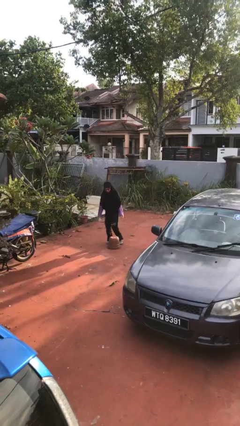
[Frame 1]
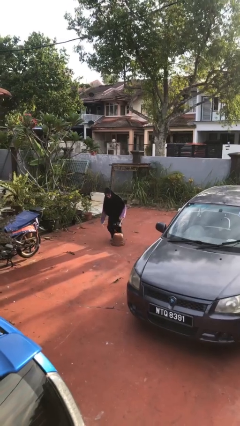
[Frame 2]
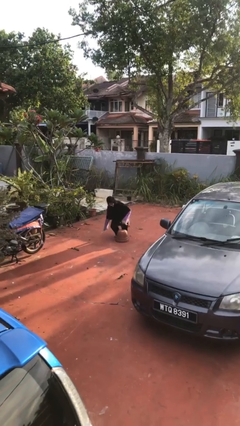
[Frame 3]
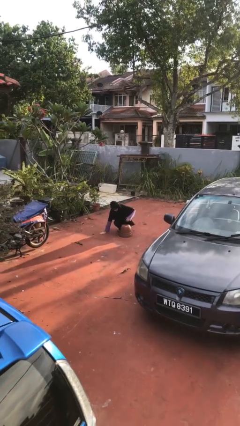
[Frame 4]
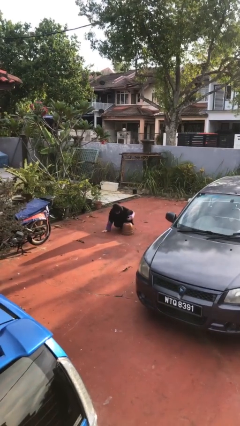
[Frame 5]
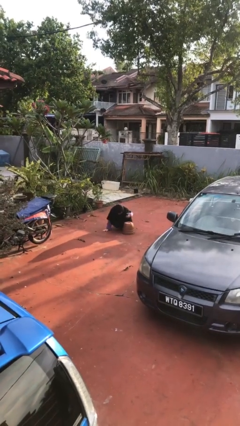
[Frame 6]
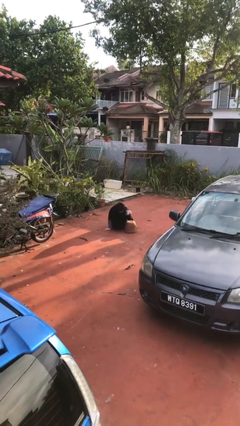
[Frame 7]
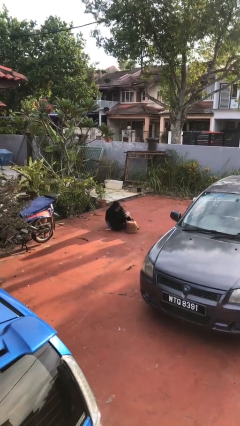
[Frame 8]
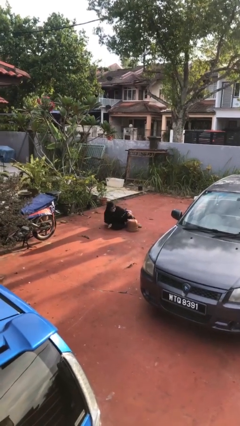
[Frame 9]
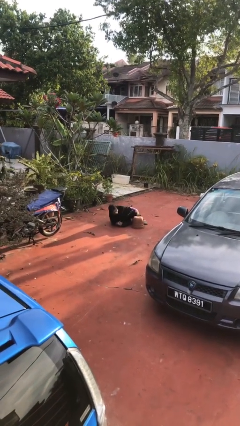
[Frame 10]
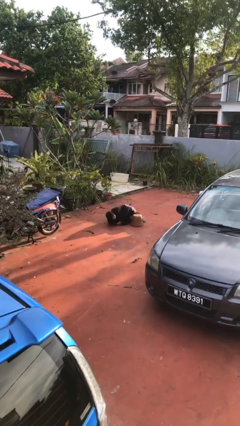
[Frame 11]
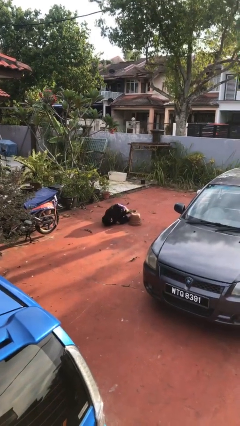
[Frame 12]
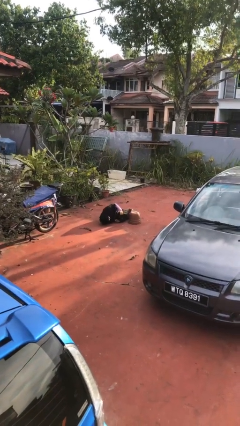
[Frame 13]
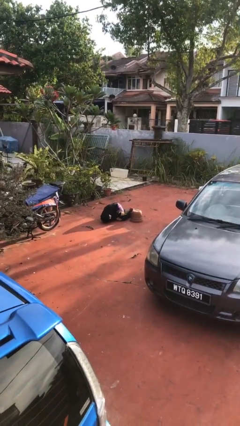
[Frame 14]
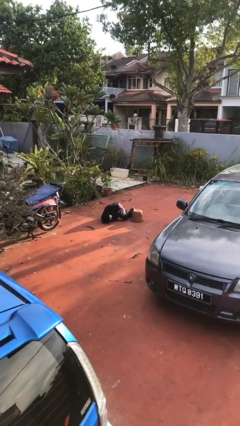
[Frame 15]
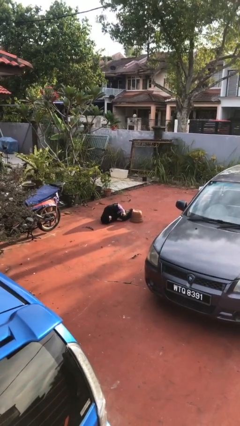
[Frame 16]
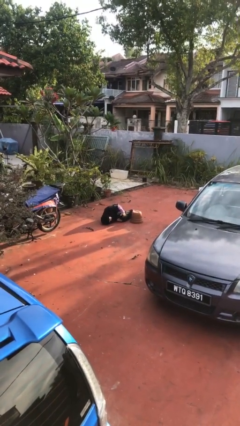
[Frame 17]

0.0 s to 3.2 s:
person lies down on floor

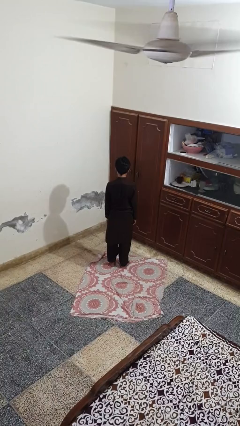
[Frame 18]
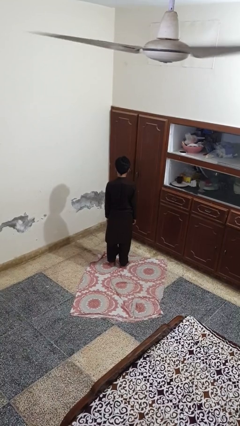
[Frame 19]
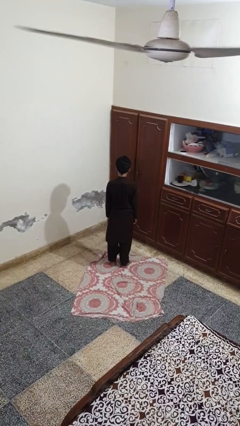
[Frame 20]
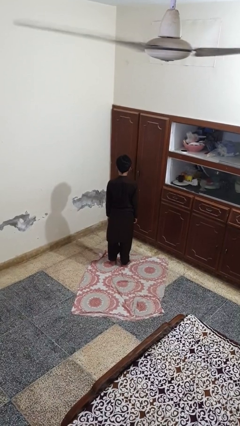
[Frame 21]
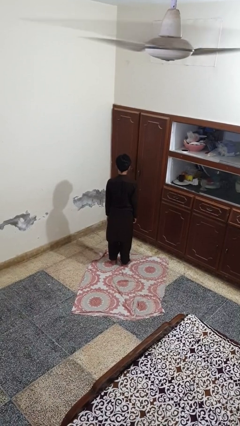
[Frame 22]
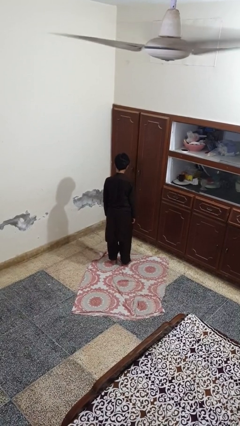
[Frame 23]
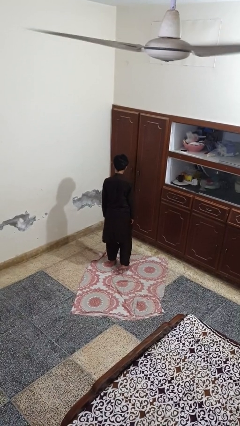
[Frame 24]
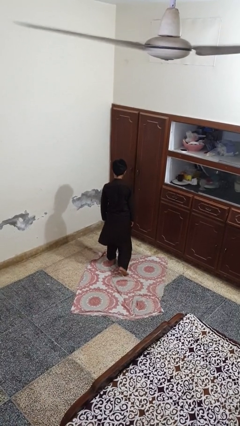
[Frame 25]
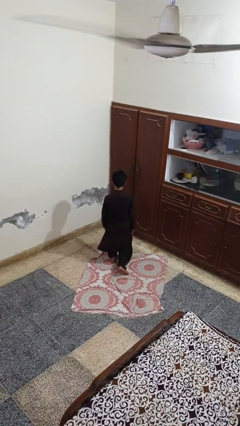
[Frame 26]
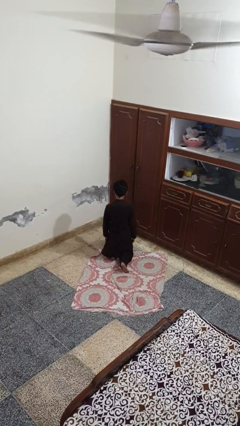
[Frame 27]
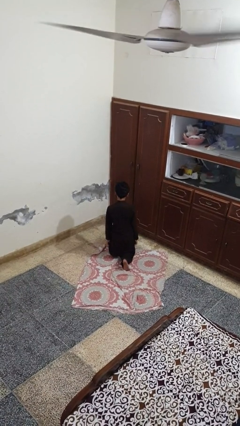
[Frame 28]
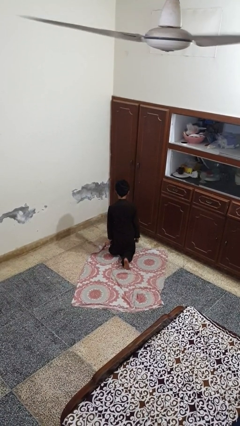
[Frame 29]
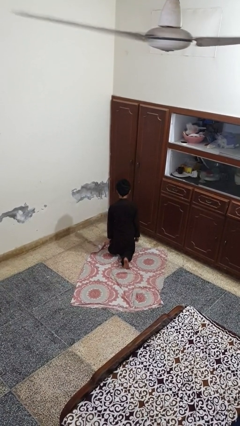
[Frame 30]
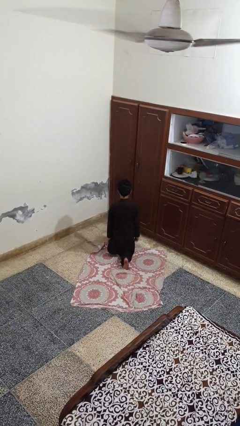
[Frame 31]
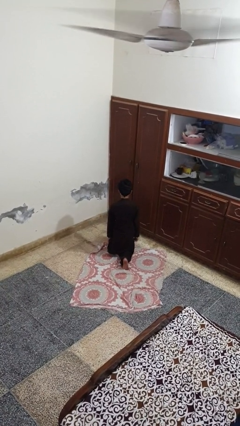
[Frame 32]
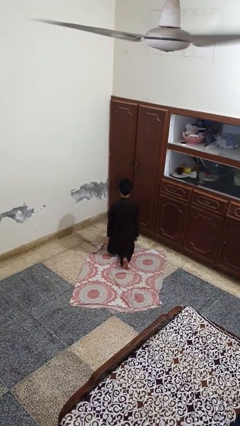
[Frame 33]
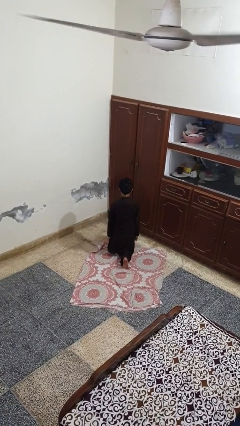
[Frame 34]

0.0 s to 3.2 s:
person kneels

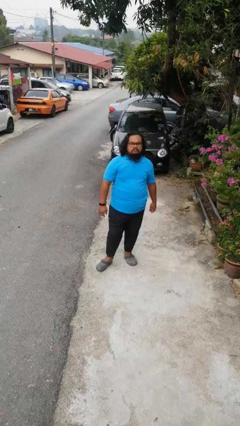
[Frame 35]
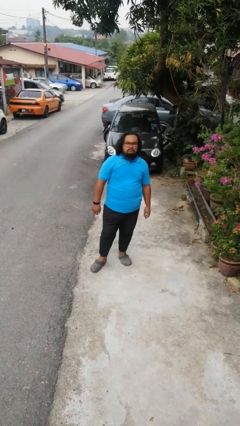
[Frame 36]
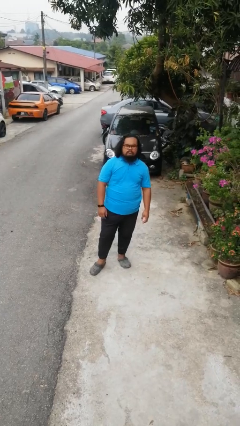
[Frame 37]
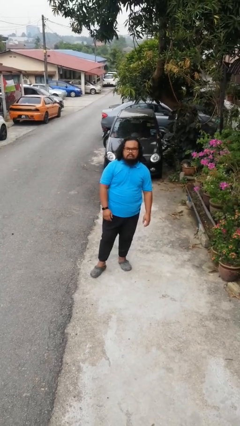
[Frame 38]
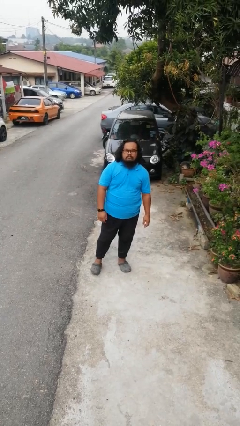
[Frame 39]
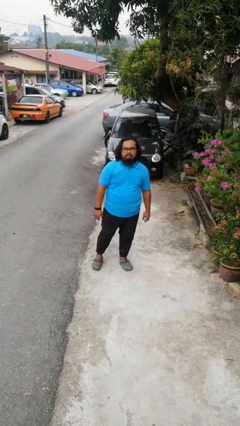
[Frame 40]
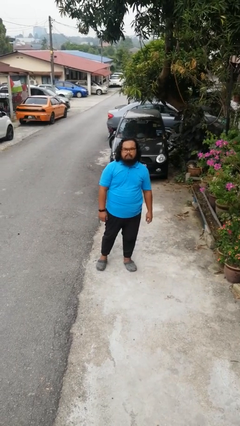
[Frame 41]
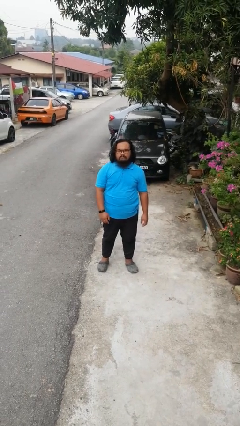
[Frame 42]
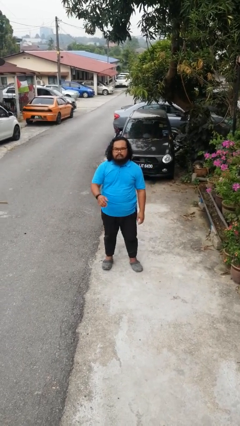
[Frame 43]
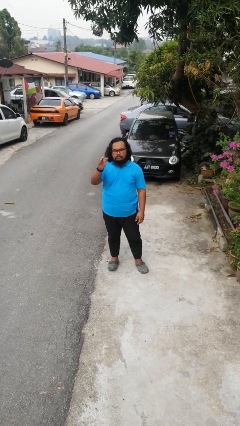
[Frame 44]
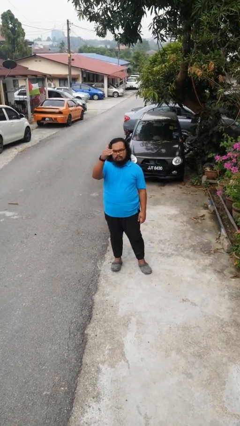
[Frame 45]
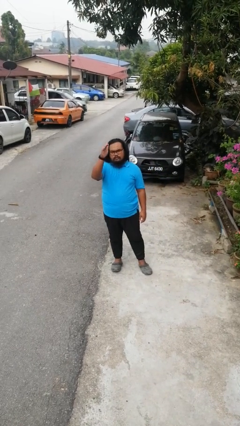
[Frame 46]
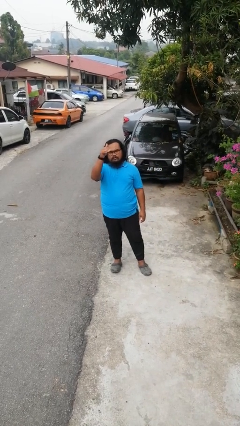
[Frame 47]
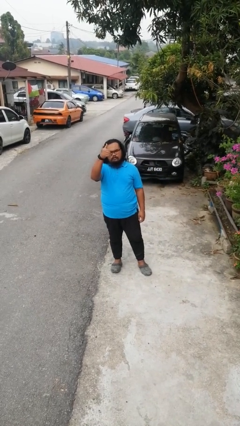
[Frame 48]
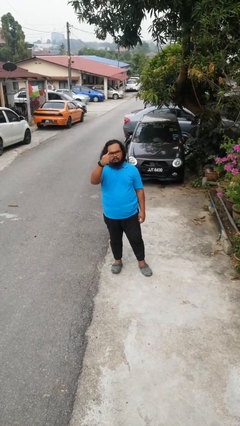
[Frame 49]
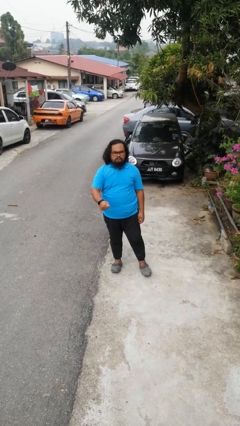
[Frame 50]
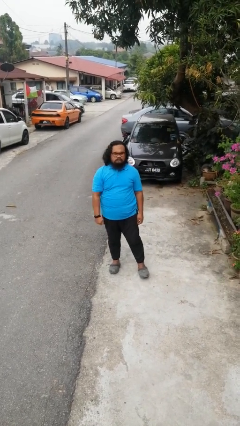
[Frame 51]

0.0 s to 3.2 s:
person gestures come here

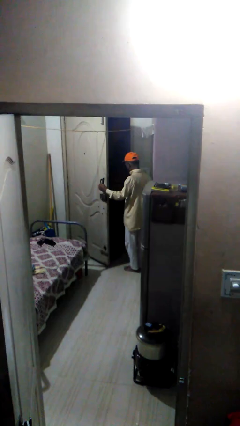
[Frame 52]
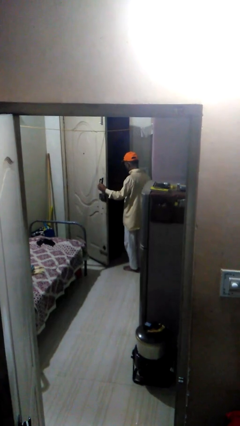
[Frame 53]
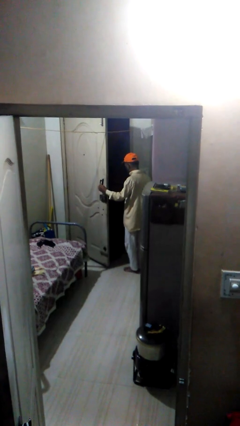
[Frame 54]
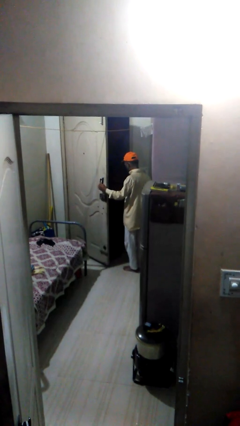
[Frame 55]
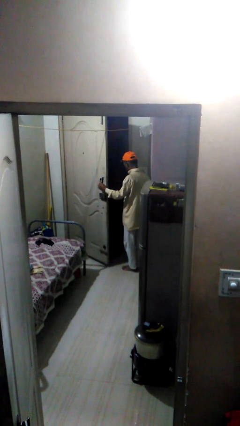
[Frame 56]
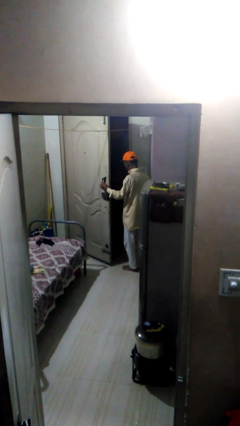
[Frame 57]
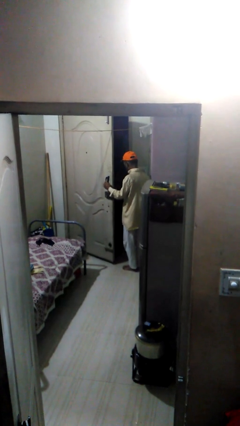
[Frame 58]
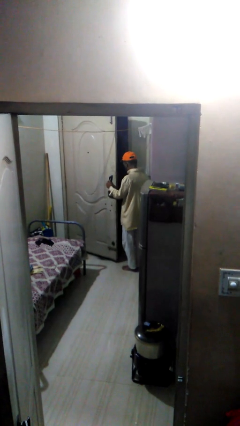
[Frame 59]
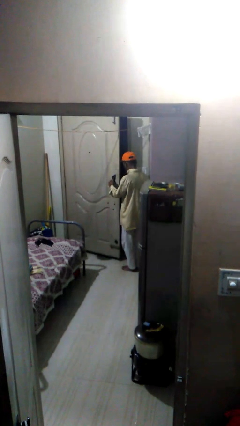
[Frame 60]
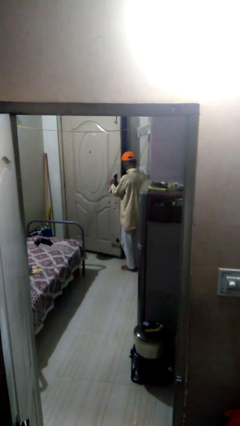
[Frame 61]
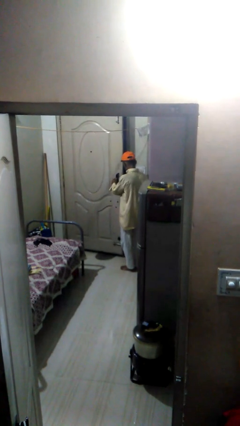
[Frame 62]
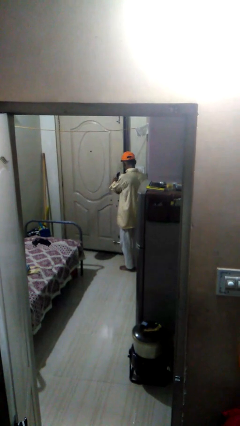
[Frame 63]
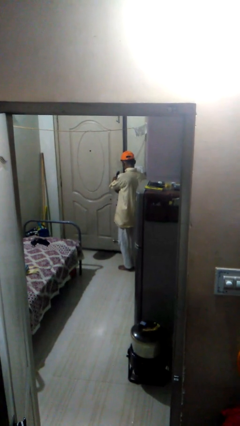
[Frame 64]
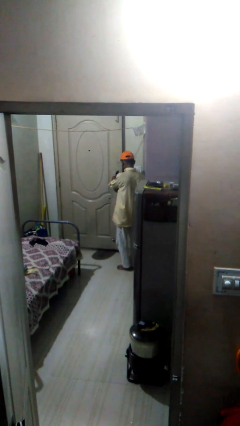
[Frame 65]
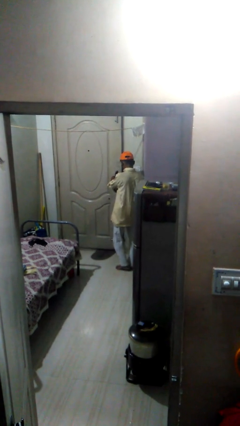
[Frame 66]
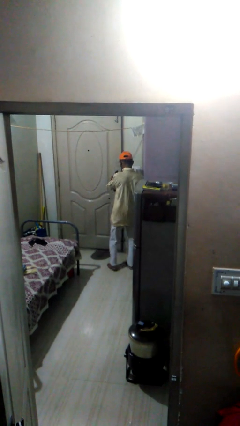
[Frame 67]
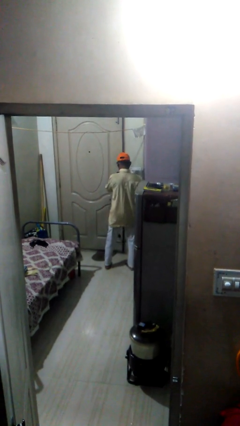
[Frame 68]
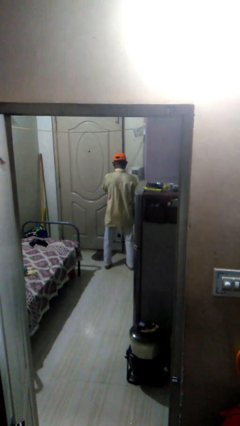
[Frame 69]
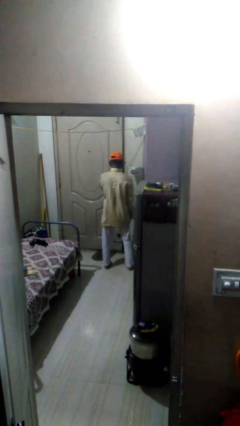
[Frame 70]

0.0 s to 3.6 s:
person closes facility door

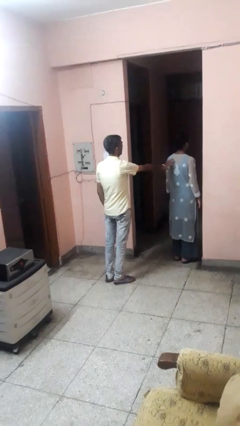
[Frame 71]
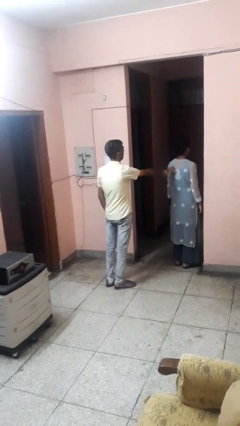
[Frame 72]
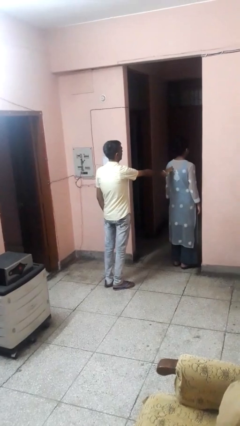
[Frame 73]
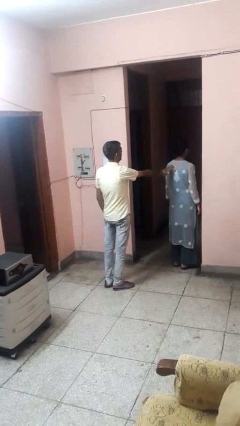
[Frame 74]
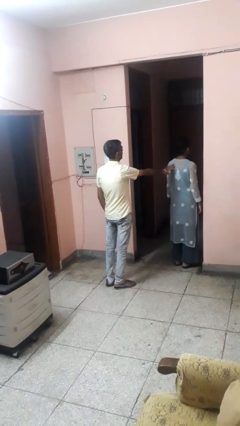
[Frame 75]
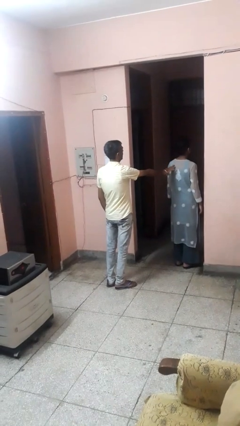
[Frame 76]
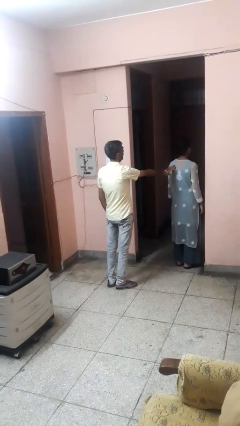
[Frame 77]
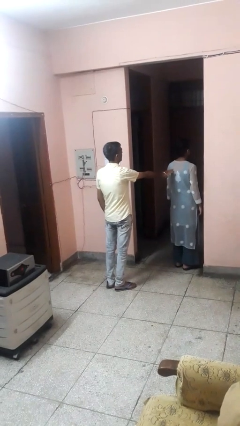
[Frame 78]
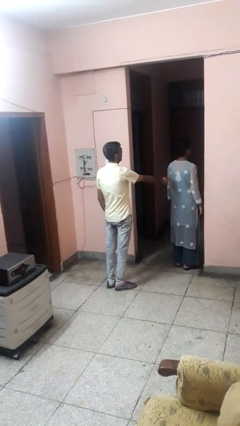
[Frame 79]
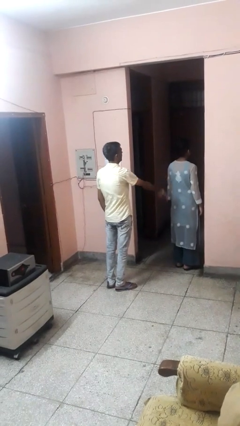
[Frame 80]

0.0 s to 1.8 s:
person touches back of person

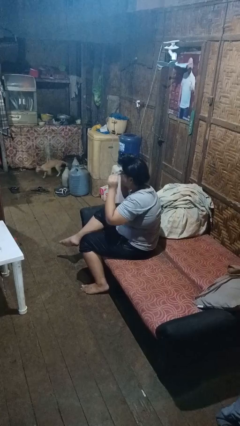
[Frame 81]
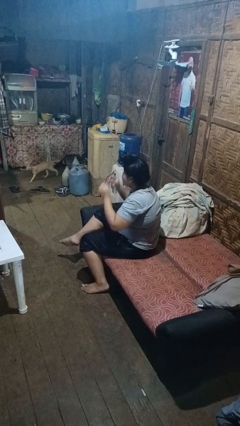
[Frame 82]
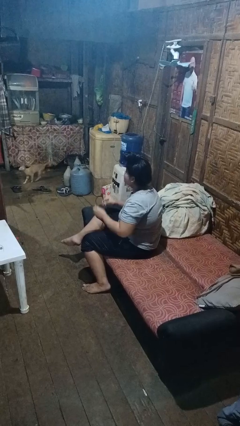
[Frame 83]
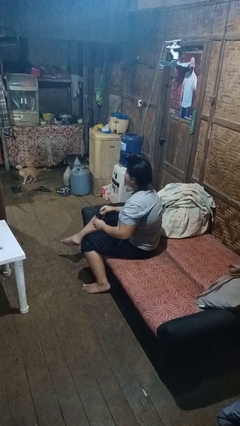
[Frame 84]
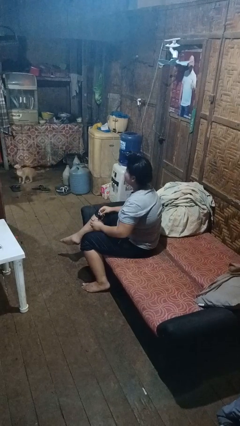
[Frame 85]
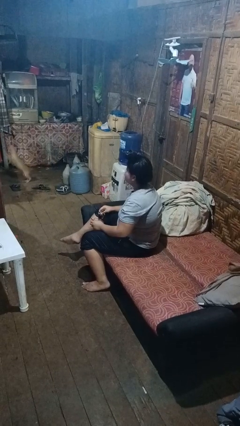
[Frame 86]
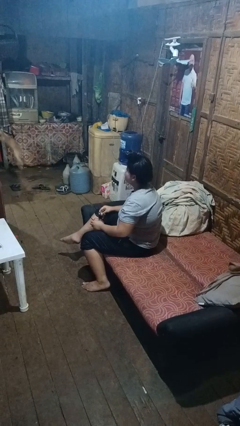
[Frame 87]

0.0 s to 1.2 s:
person takes off glasses

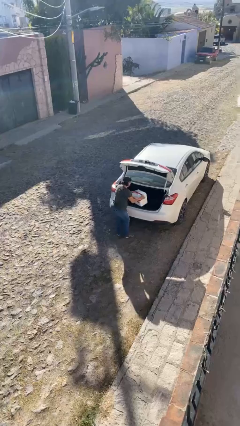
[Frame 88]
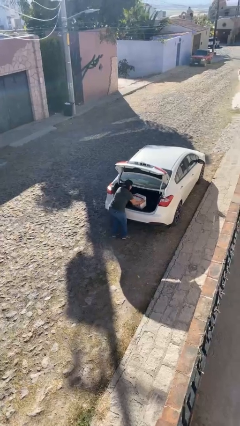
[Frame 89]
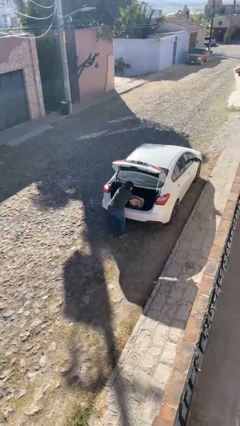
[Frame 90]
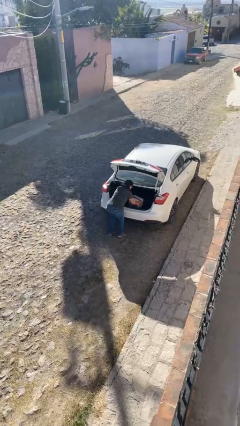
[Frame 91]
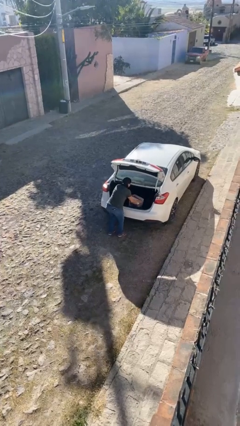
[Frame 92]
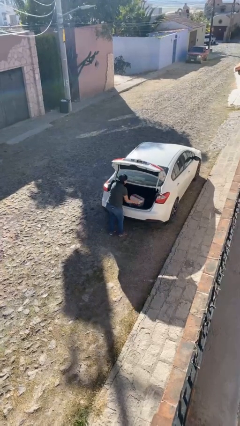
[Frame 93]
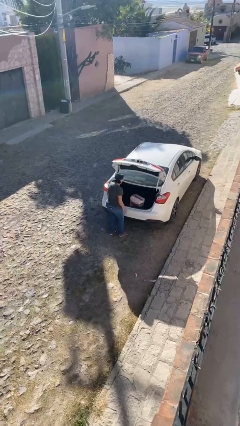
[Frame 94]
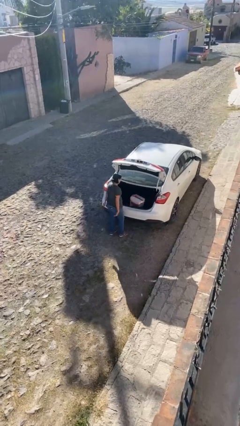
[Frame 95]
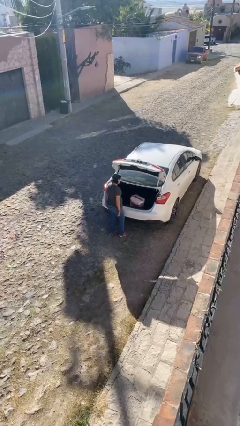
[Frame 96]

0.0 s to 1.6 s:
person loads car
